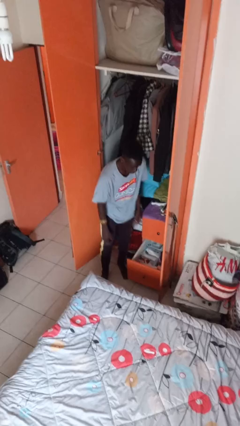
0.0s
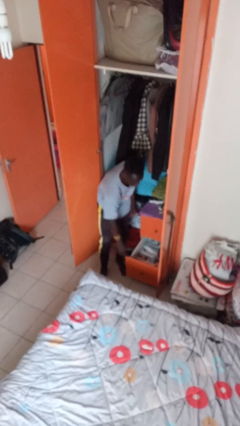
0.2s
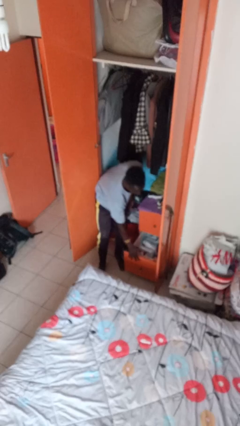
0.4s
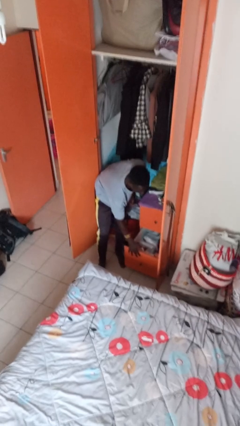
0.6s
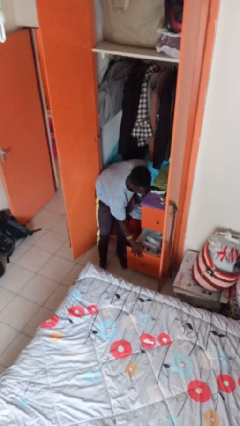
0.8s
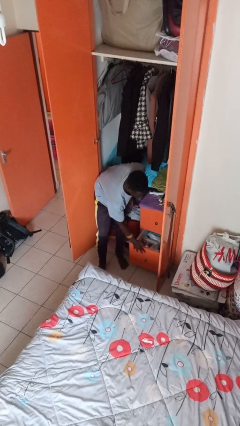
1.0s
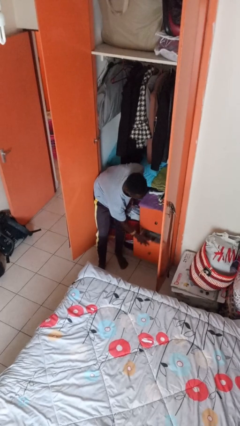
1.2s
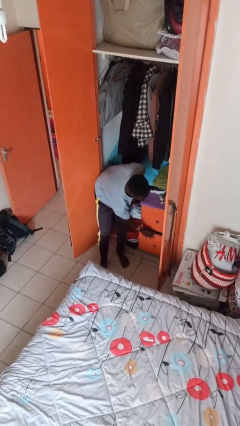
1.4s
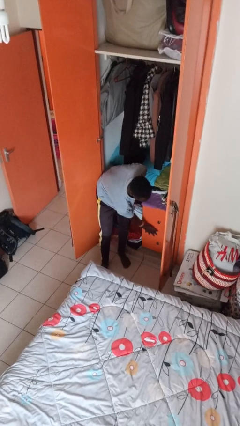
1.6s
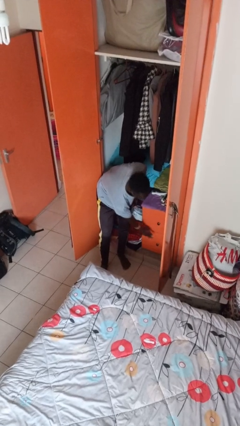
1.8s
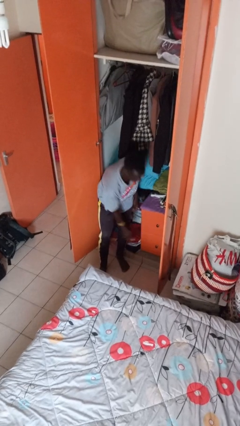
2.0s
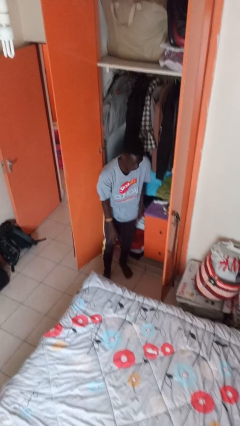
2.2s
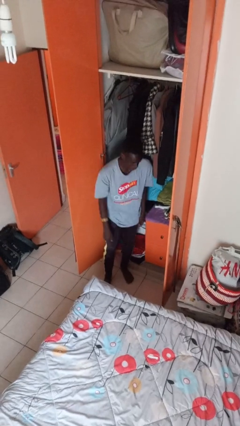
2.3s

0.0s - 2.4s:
person closes dresser drawer

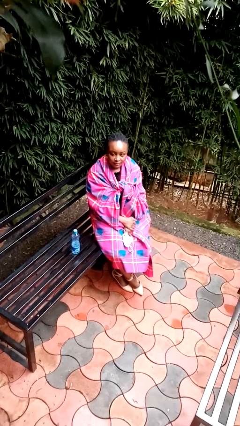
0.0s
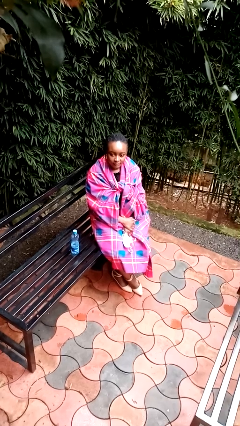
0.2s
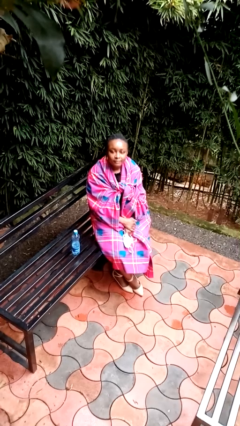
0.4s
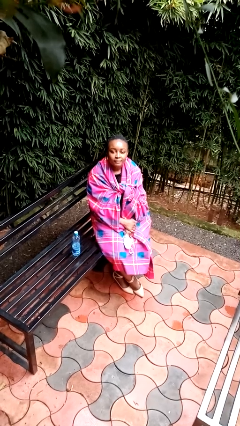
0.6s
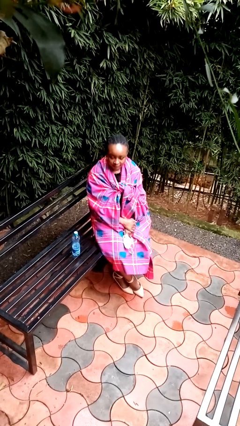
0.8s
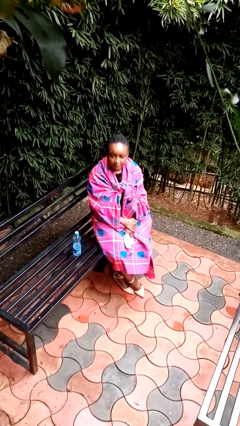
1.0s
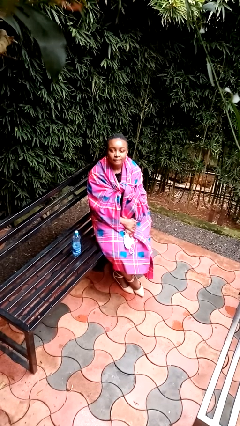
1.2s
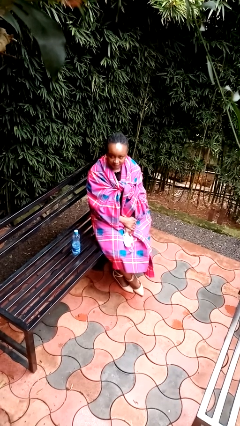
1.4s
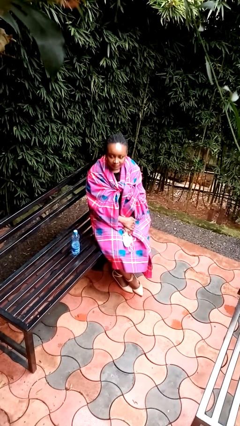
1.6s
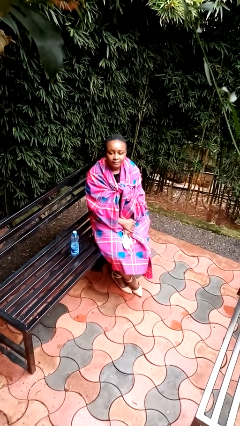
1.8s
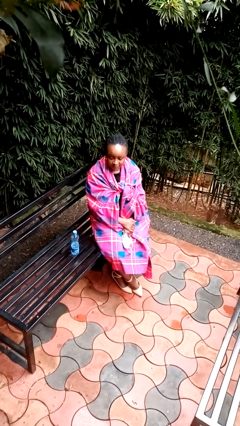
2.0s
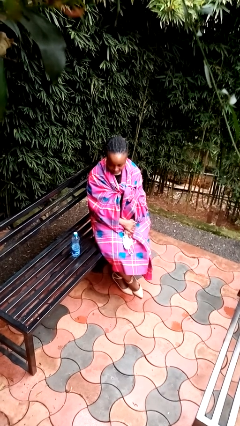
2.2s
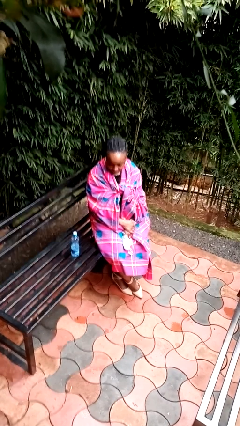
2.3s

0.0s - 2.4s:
person nods head

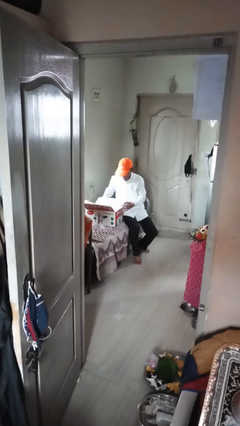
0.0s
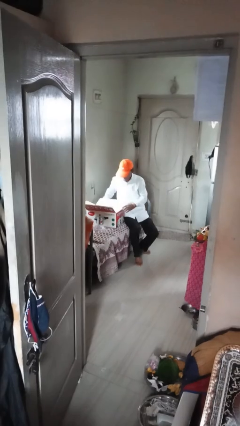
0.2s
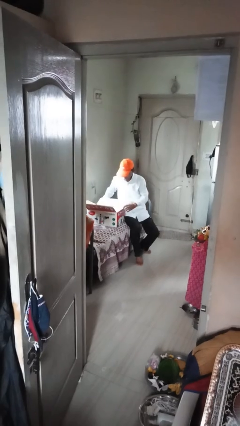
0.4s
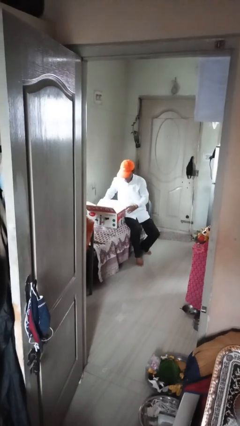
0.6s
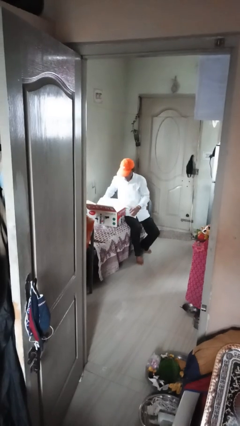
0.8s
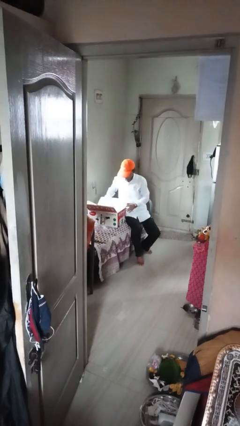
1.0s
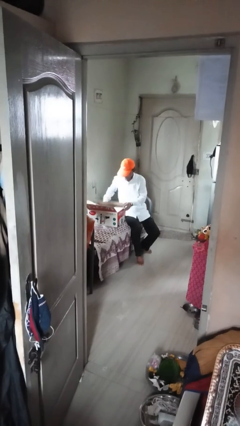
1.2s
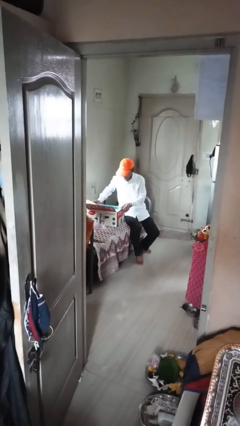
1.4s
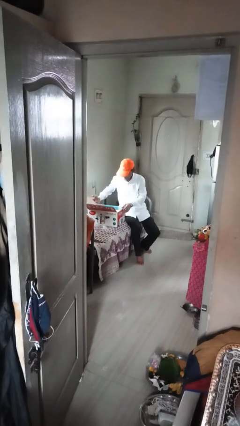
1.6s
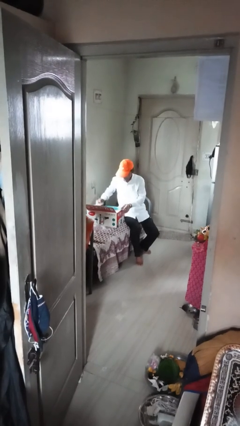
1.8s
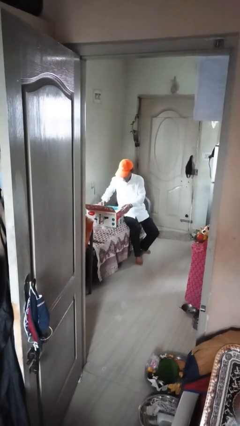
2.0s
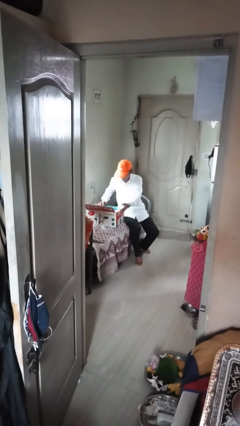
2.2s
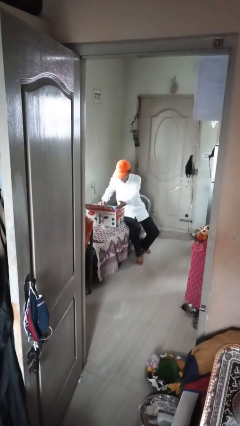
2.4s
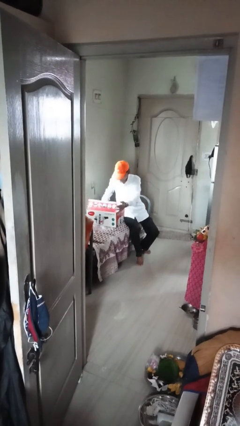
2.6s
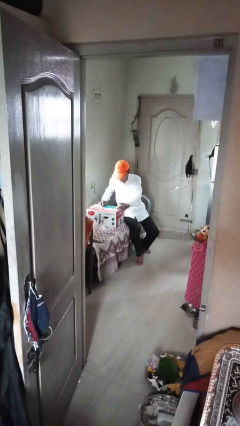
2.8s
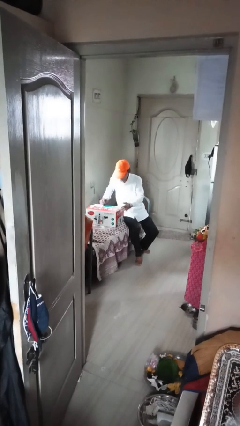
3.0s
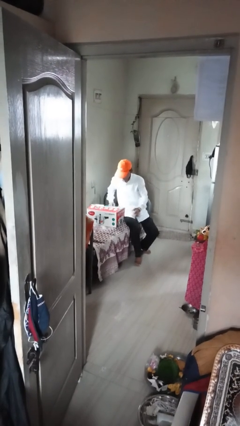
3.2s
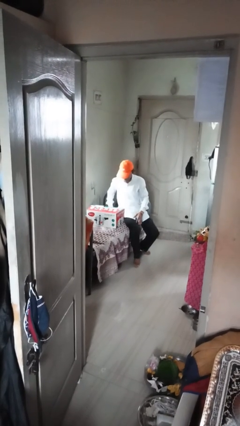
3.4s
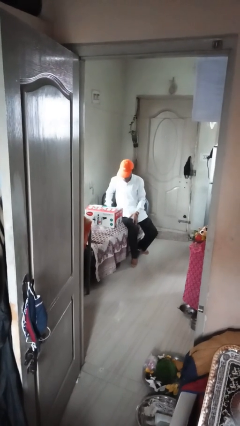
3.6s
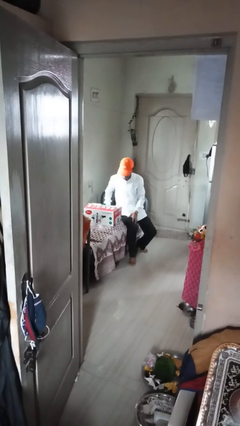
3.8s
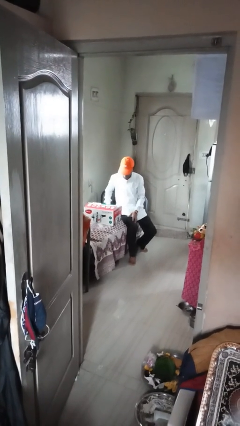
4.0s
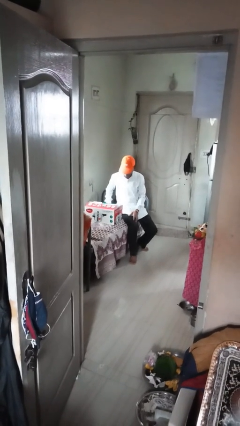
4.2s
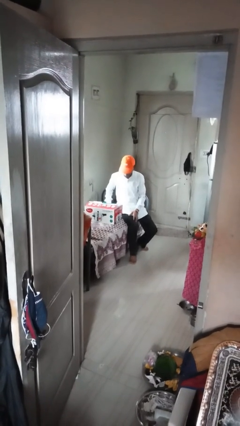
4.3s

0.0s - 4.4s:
person closes box

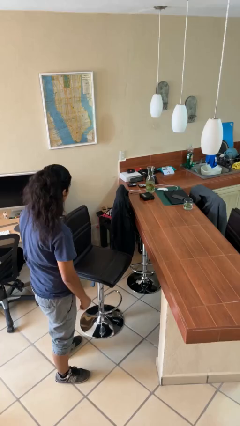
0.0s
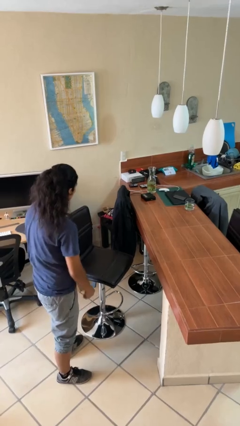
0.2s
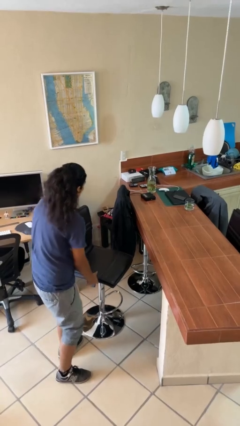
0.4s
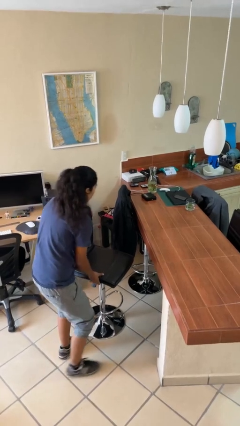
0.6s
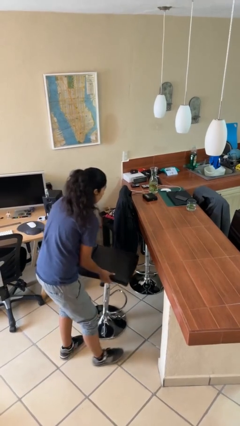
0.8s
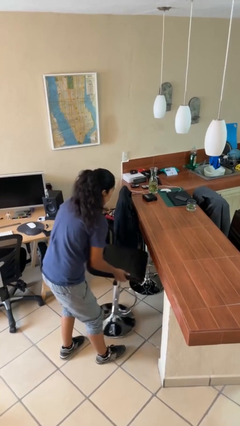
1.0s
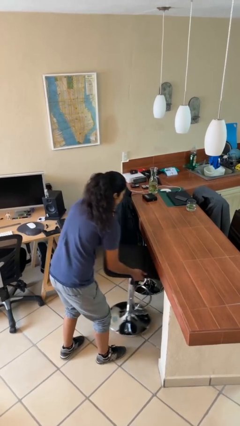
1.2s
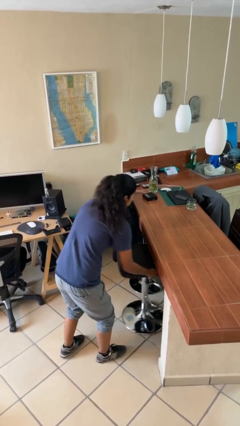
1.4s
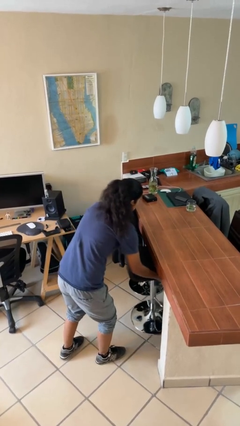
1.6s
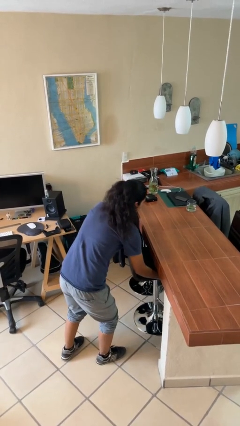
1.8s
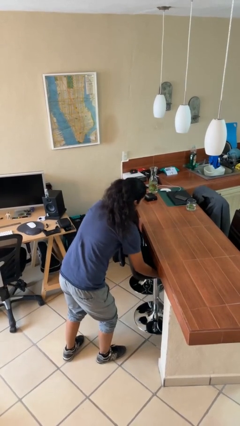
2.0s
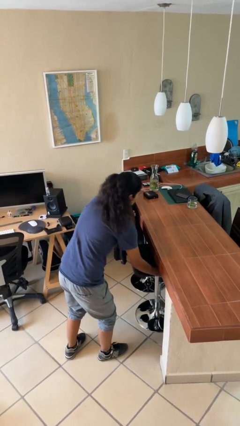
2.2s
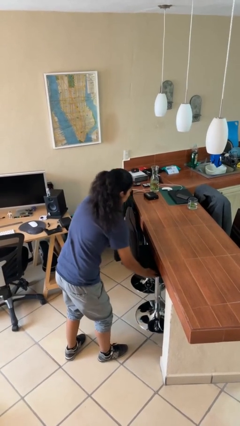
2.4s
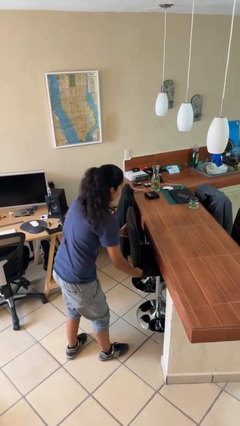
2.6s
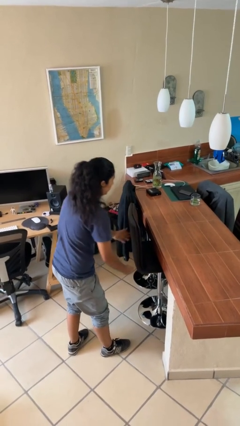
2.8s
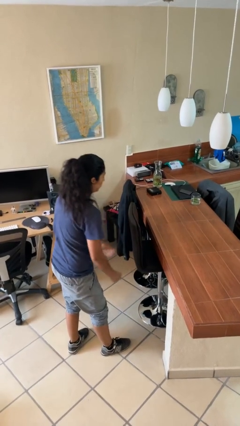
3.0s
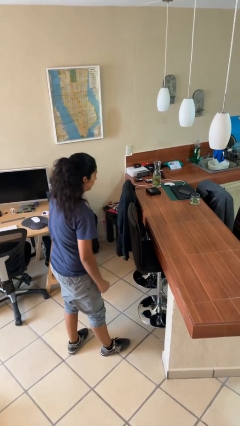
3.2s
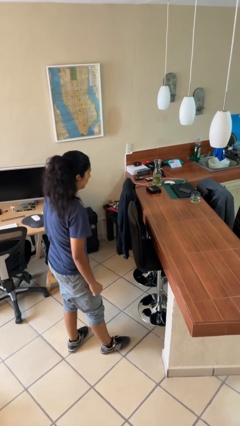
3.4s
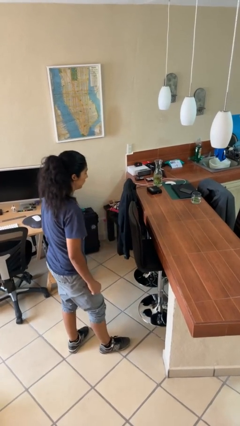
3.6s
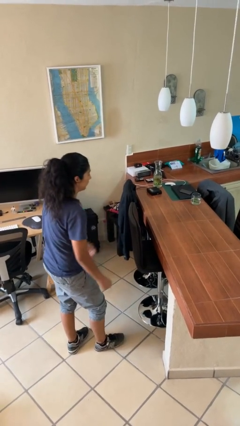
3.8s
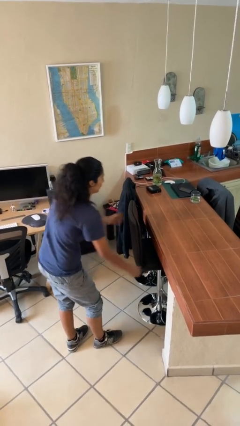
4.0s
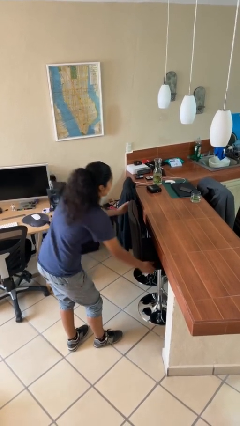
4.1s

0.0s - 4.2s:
person pushes in chair

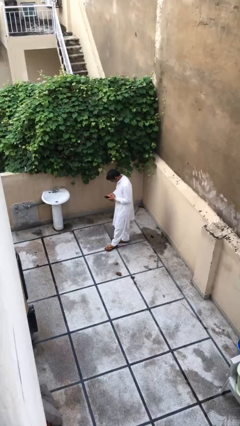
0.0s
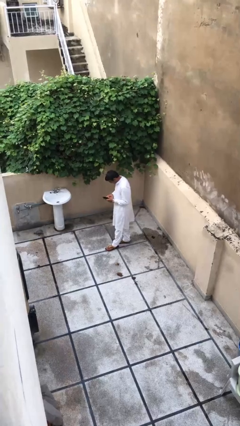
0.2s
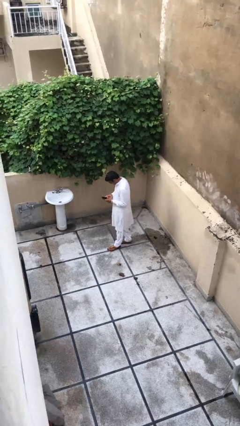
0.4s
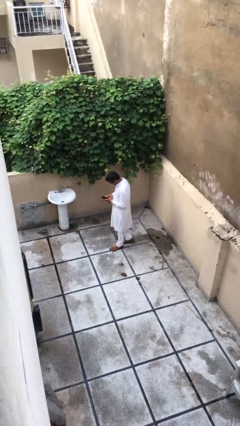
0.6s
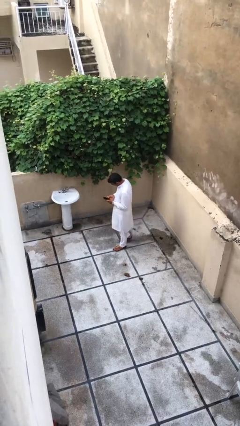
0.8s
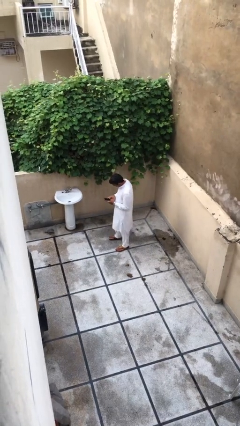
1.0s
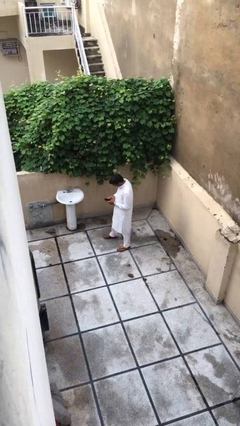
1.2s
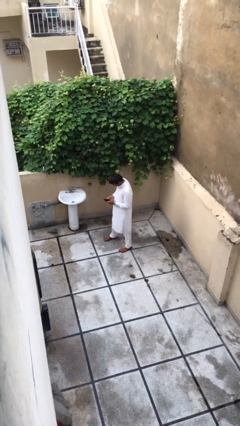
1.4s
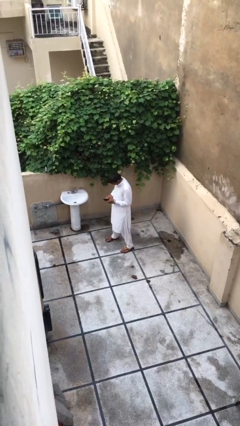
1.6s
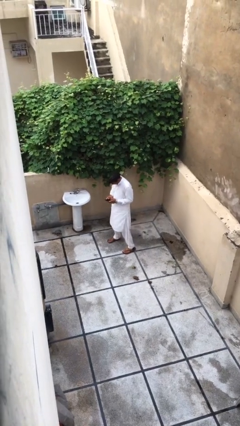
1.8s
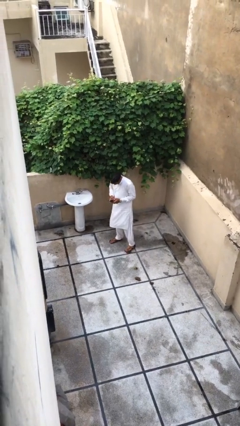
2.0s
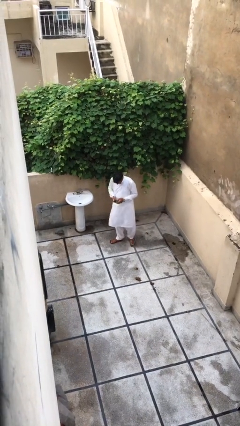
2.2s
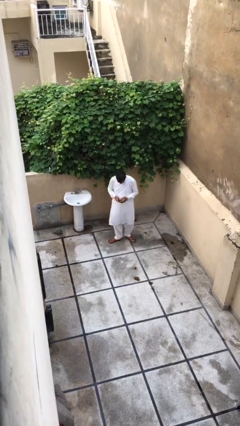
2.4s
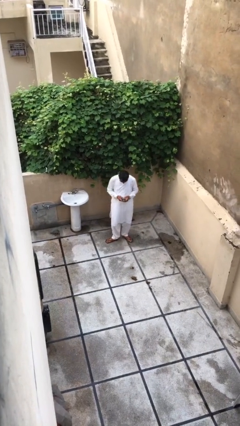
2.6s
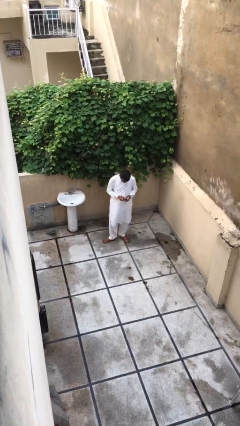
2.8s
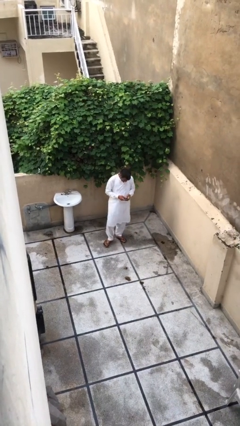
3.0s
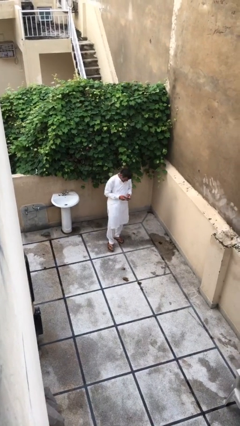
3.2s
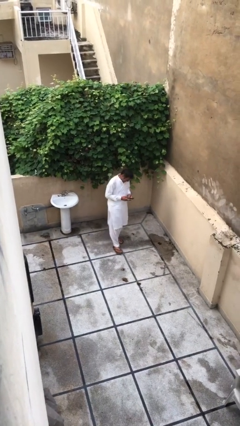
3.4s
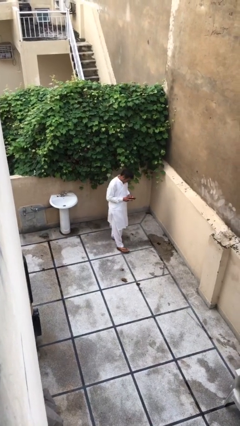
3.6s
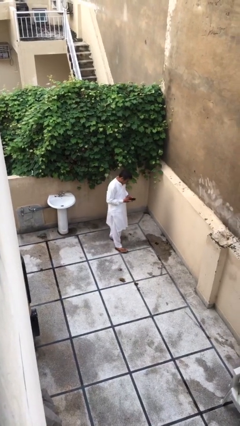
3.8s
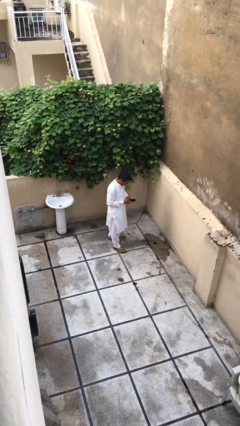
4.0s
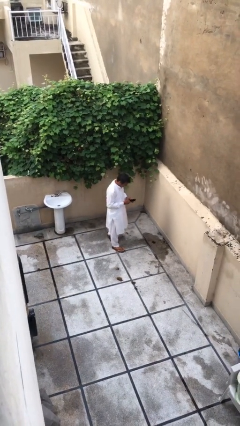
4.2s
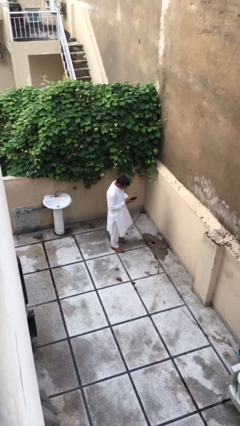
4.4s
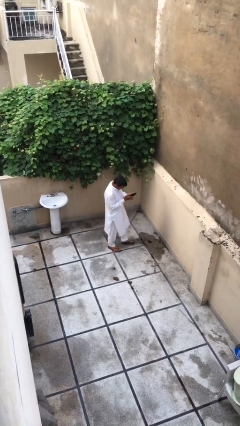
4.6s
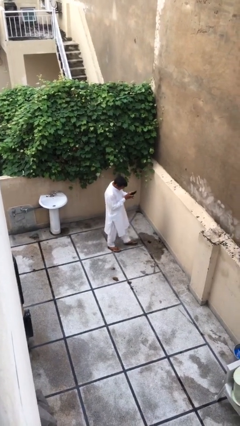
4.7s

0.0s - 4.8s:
person texts on phone
